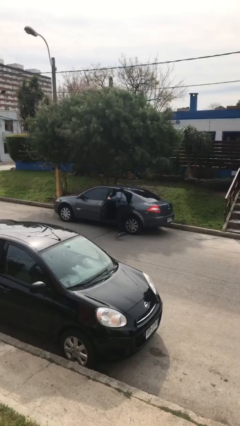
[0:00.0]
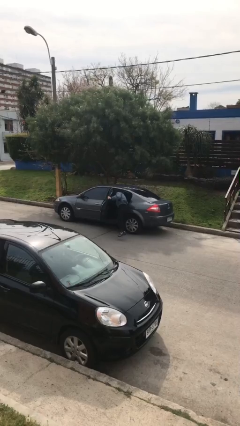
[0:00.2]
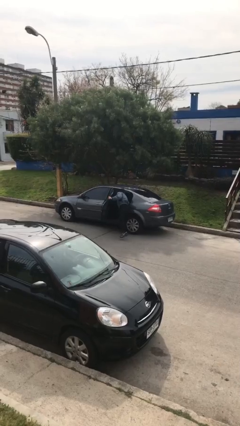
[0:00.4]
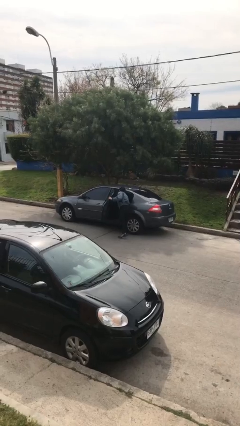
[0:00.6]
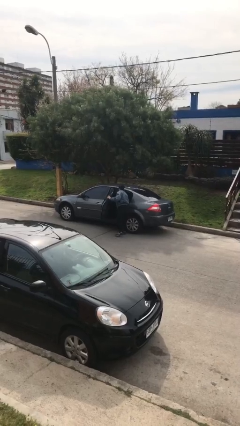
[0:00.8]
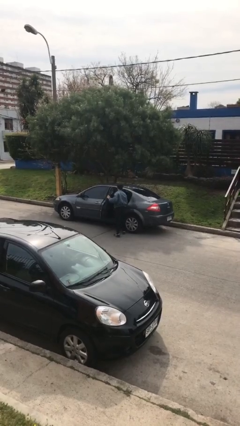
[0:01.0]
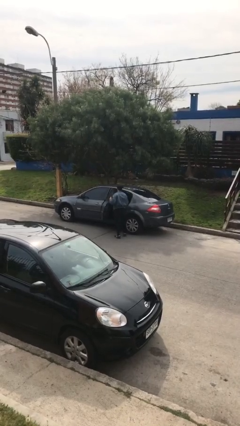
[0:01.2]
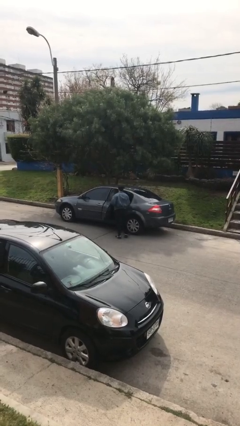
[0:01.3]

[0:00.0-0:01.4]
person unloads car

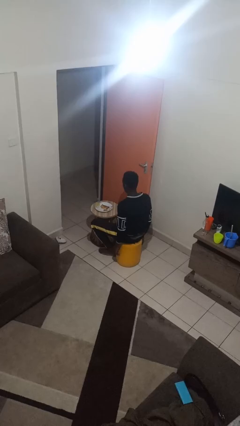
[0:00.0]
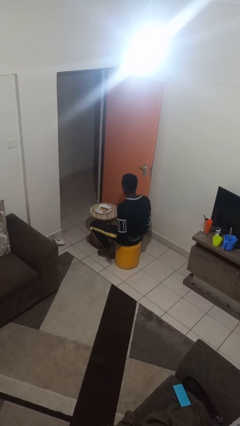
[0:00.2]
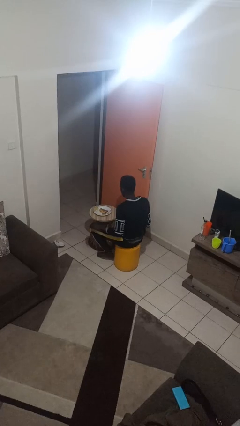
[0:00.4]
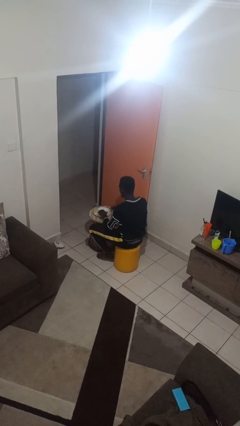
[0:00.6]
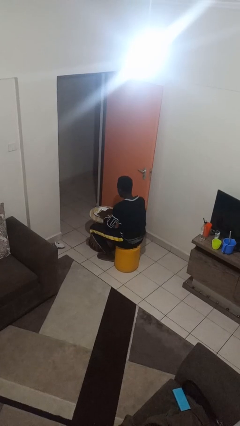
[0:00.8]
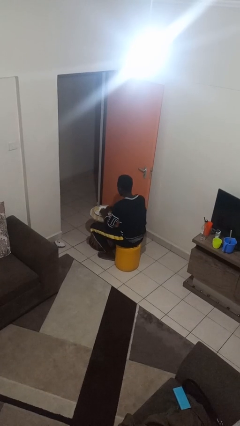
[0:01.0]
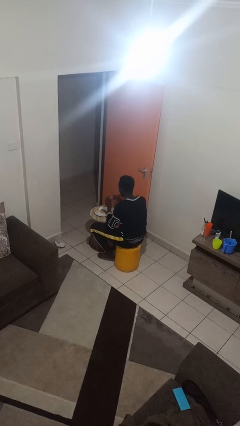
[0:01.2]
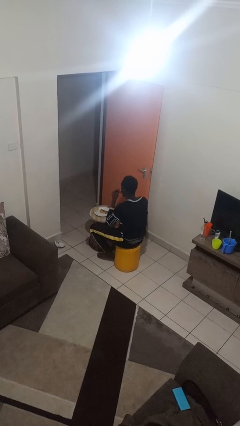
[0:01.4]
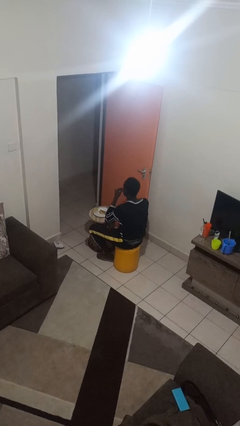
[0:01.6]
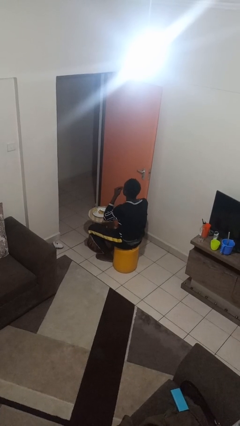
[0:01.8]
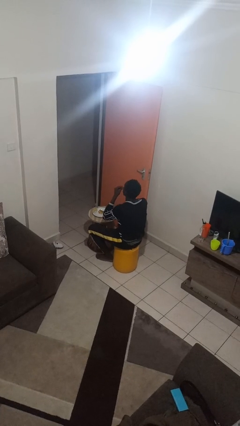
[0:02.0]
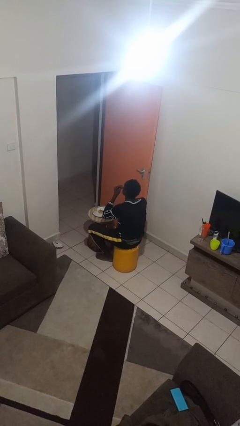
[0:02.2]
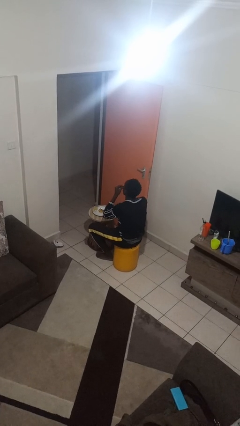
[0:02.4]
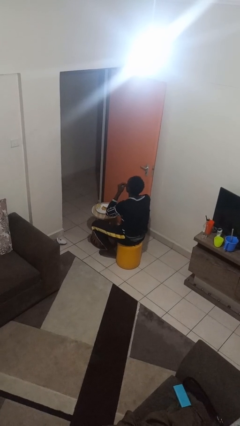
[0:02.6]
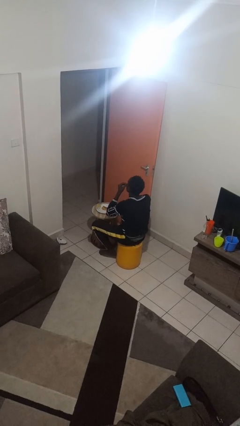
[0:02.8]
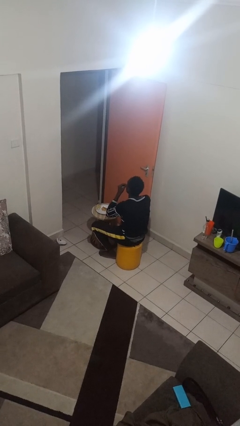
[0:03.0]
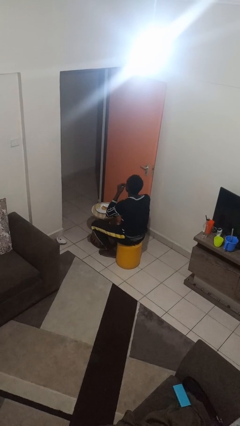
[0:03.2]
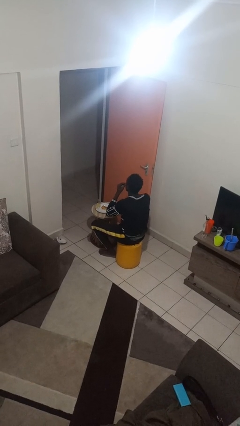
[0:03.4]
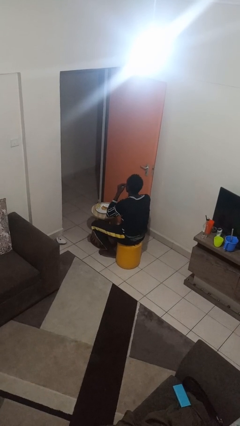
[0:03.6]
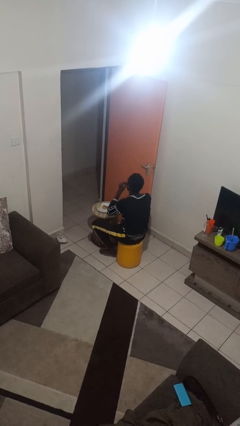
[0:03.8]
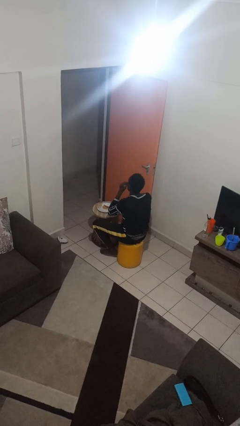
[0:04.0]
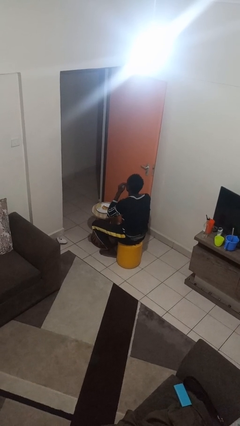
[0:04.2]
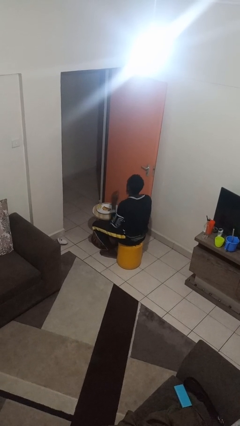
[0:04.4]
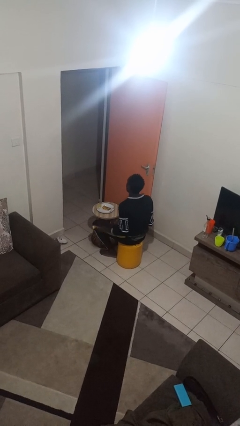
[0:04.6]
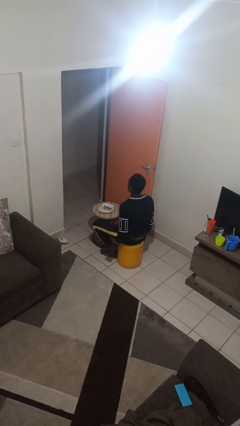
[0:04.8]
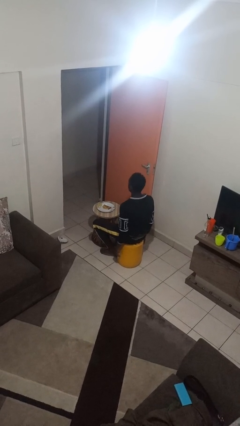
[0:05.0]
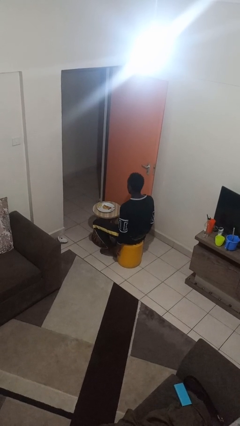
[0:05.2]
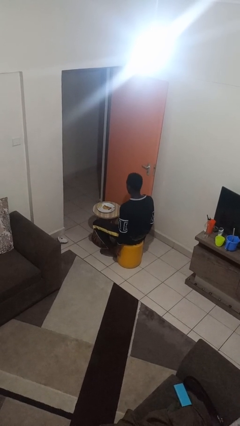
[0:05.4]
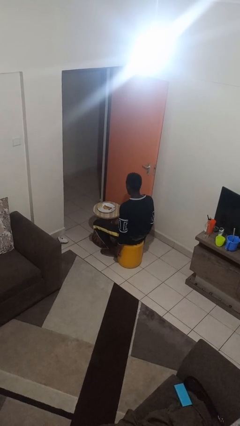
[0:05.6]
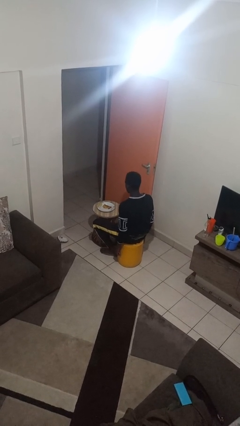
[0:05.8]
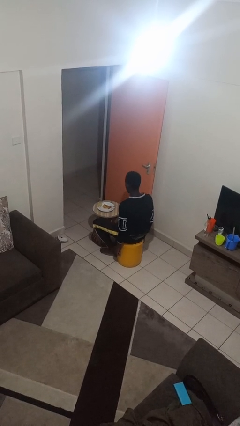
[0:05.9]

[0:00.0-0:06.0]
person eats with hands

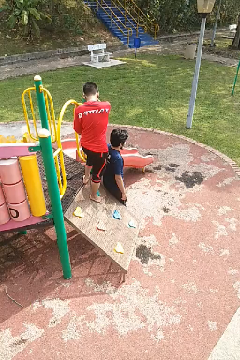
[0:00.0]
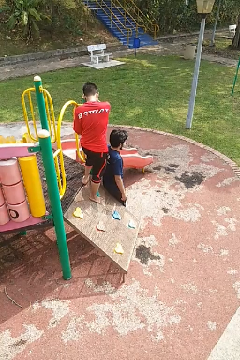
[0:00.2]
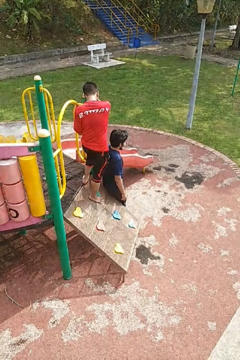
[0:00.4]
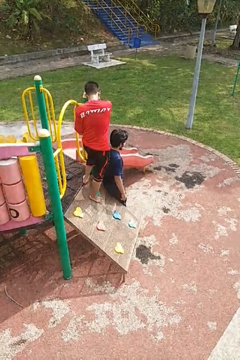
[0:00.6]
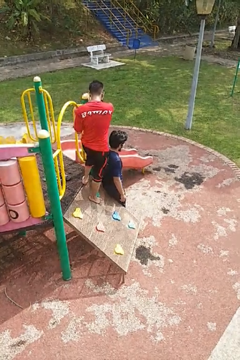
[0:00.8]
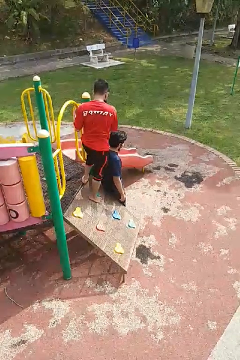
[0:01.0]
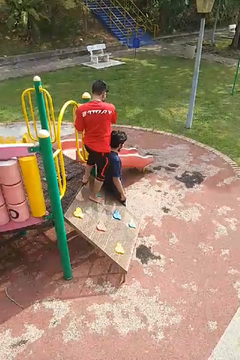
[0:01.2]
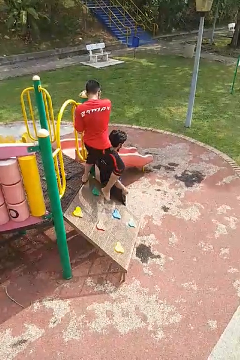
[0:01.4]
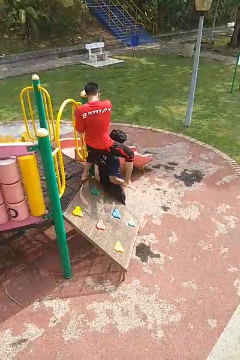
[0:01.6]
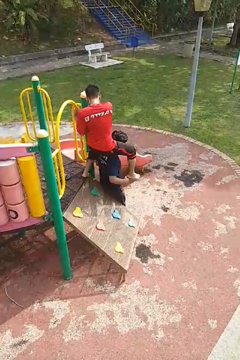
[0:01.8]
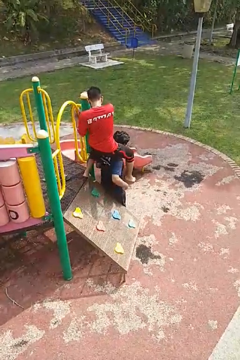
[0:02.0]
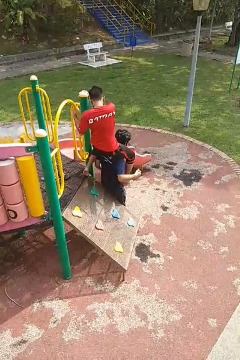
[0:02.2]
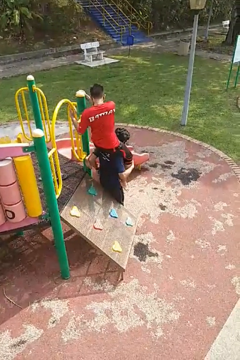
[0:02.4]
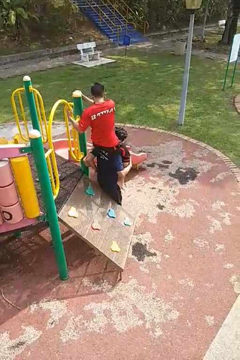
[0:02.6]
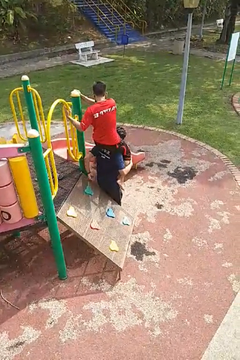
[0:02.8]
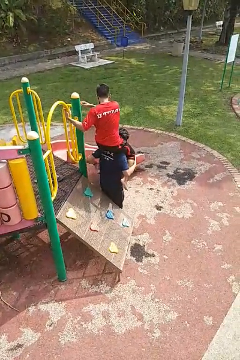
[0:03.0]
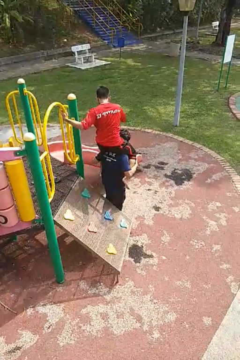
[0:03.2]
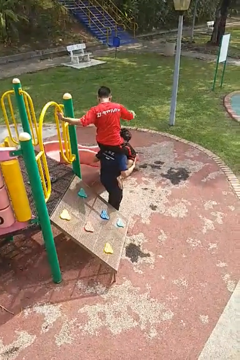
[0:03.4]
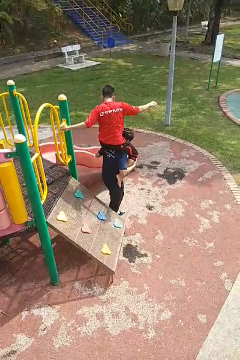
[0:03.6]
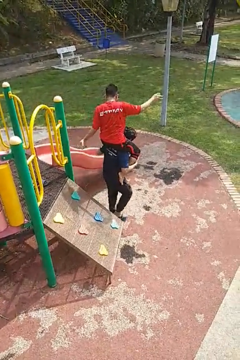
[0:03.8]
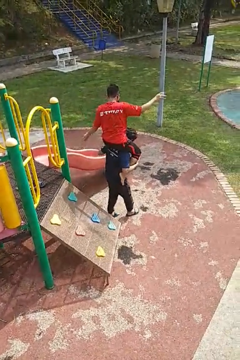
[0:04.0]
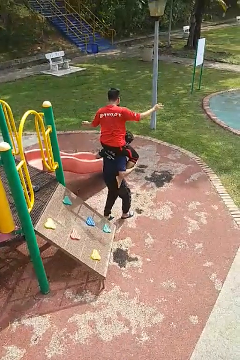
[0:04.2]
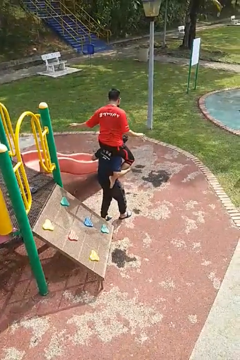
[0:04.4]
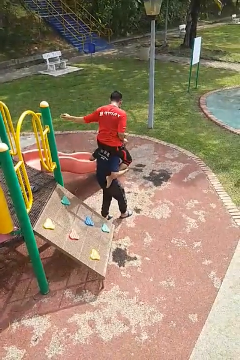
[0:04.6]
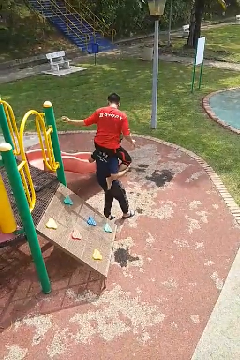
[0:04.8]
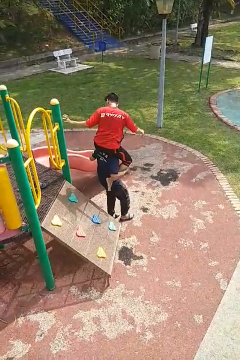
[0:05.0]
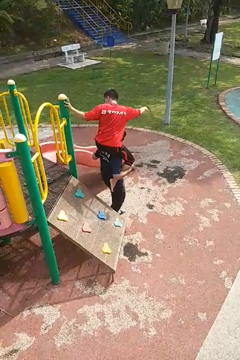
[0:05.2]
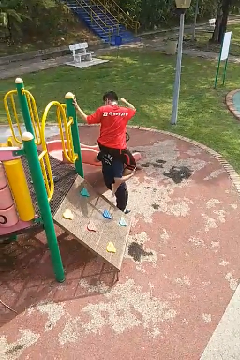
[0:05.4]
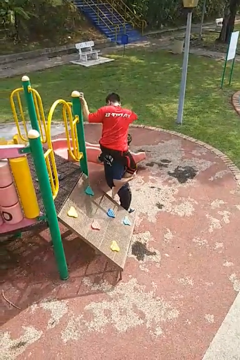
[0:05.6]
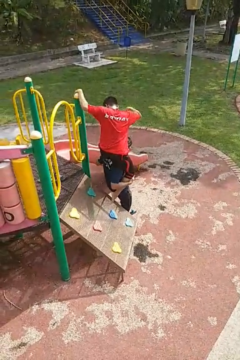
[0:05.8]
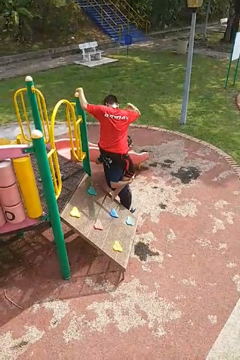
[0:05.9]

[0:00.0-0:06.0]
person carries person on shoulders

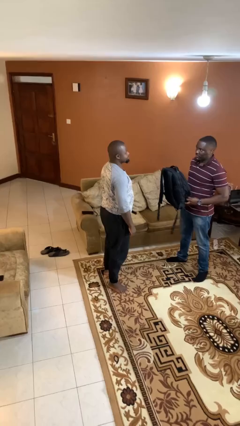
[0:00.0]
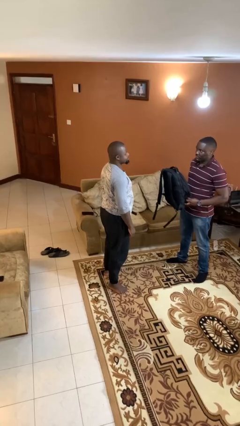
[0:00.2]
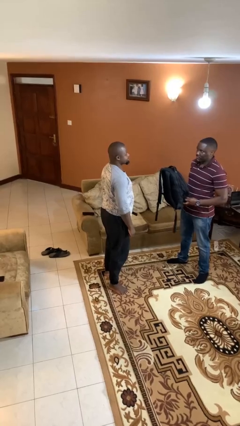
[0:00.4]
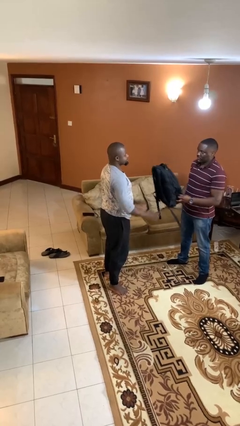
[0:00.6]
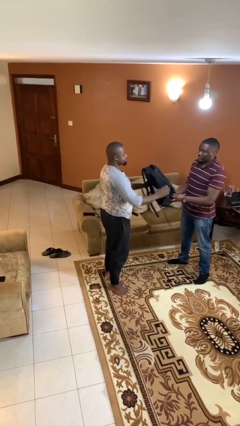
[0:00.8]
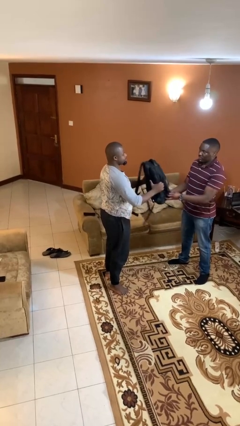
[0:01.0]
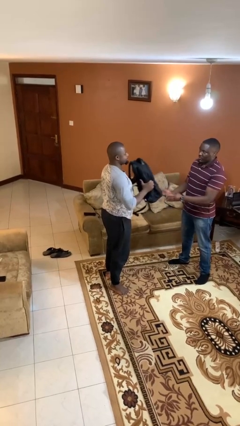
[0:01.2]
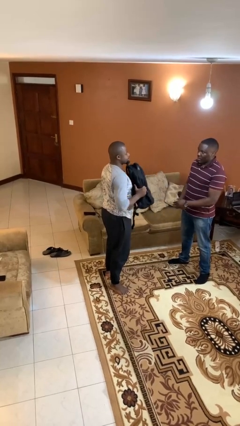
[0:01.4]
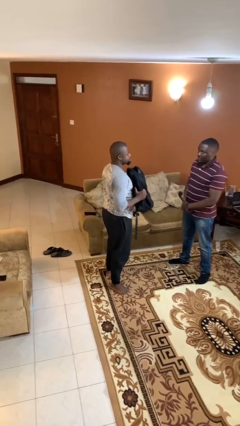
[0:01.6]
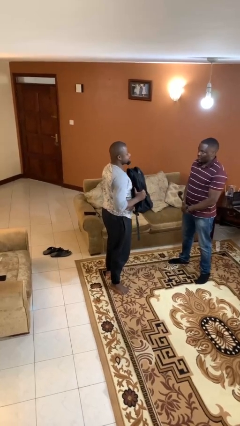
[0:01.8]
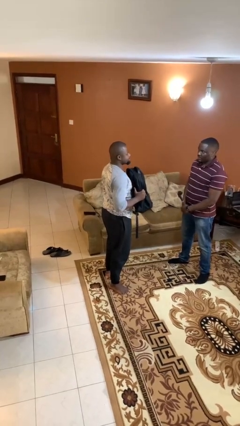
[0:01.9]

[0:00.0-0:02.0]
person transfers object to person

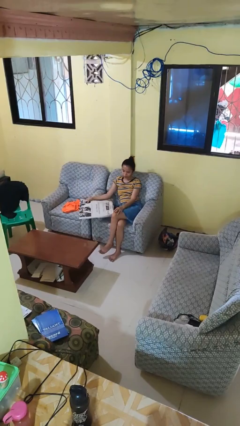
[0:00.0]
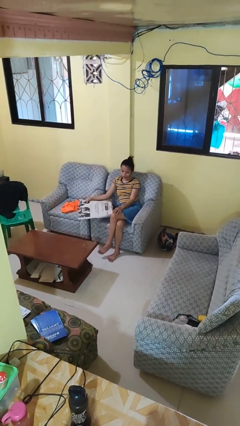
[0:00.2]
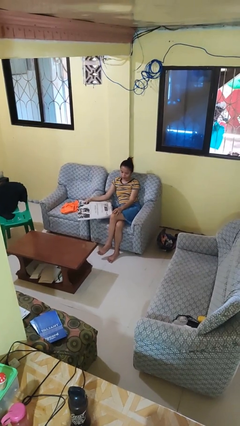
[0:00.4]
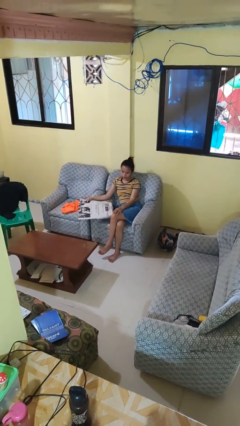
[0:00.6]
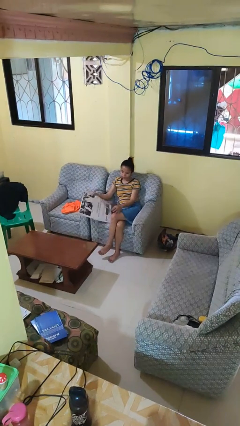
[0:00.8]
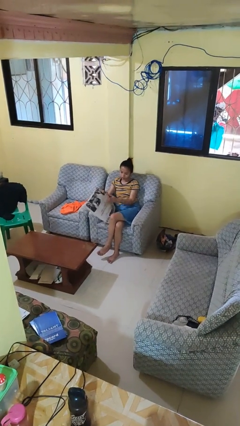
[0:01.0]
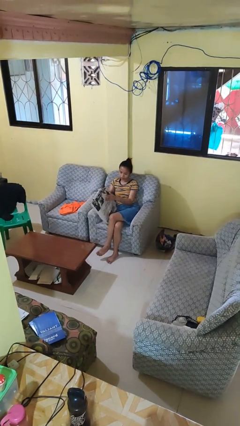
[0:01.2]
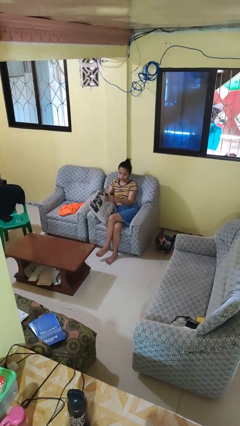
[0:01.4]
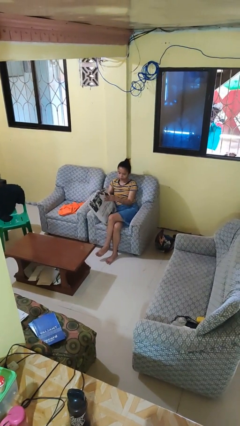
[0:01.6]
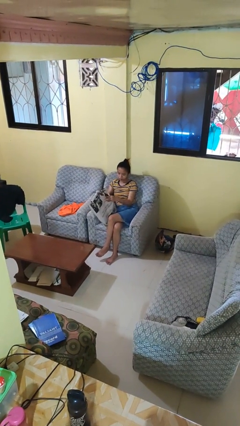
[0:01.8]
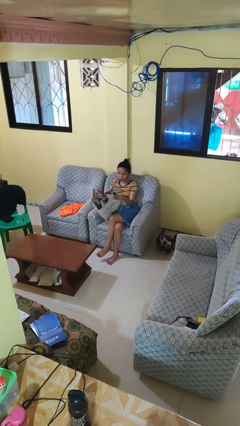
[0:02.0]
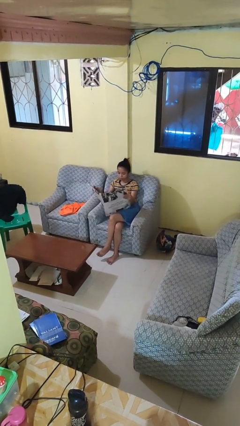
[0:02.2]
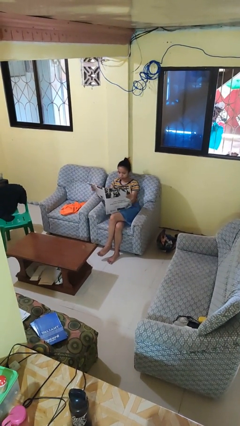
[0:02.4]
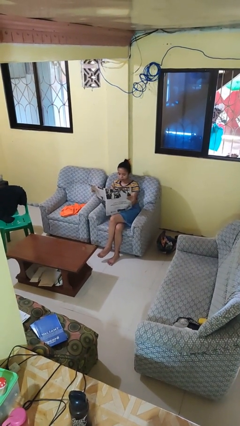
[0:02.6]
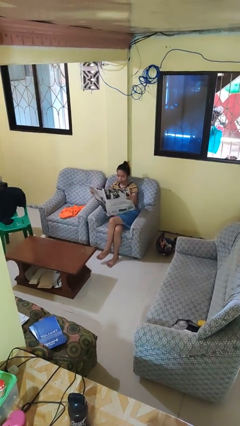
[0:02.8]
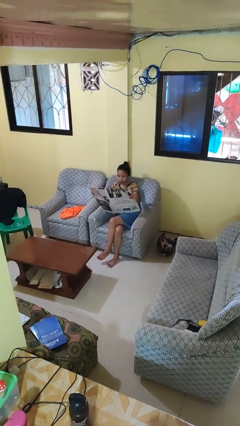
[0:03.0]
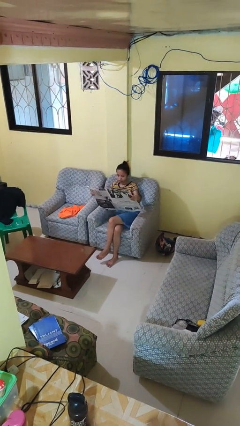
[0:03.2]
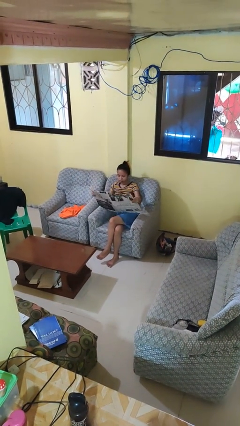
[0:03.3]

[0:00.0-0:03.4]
person reads newspaper
